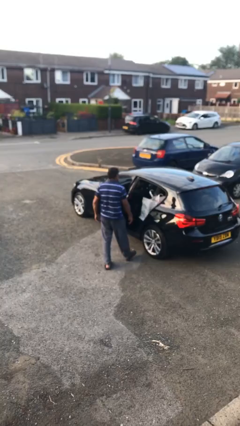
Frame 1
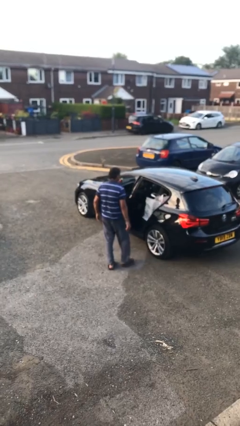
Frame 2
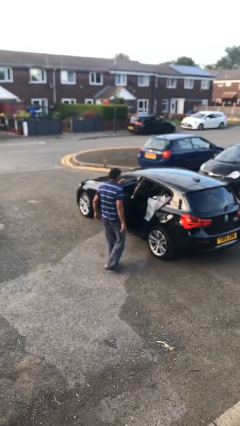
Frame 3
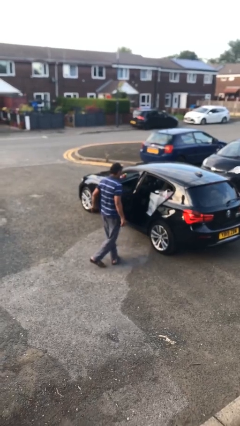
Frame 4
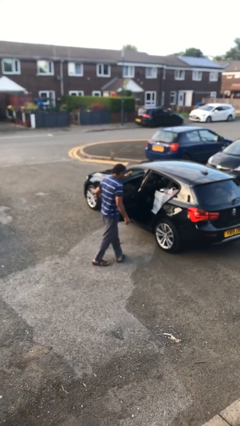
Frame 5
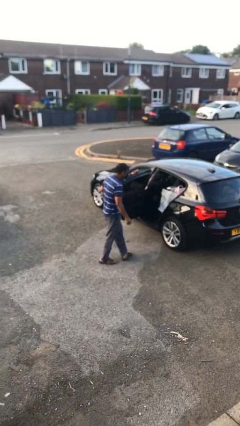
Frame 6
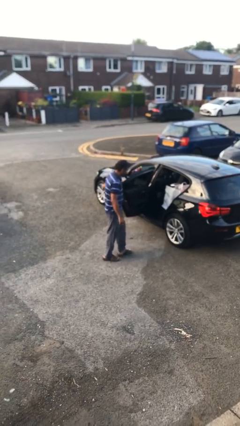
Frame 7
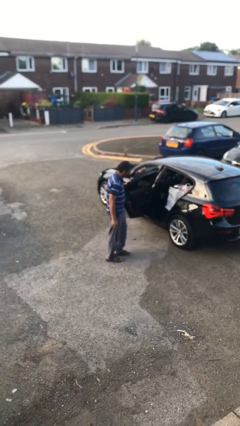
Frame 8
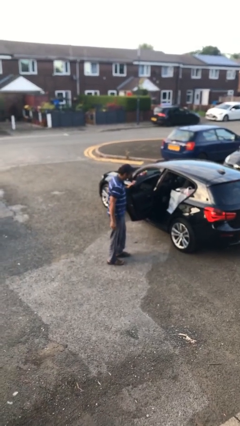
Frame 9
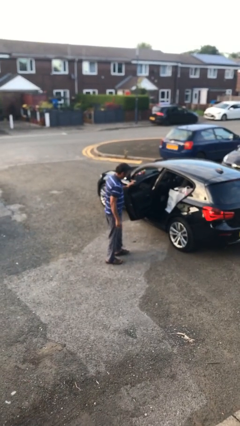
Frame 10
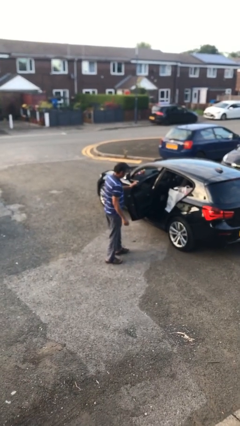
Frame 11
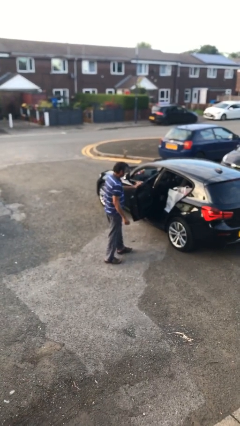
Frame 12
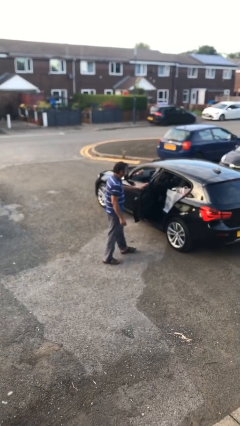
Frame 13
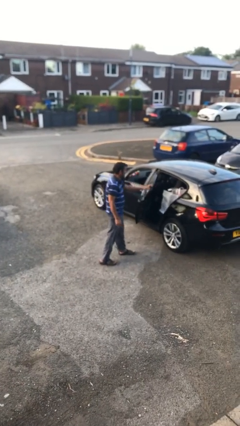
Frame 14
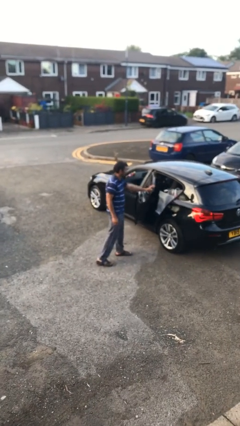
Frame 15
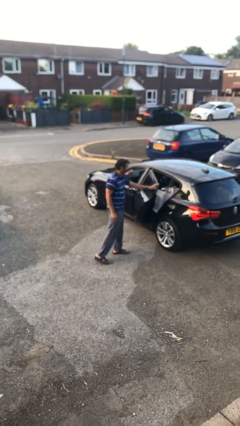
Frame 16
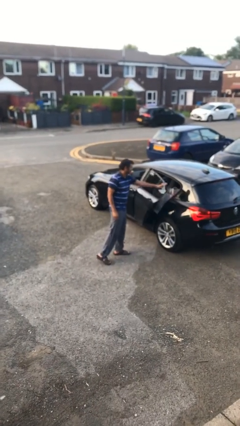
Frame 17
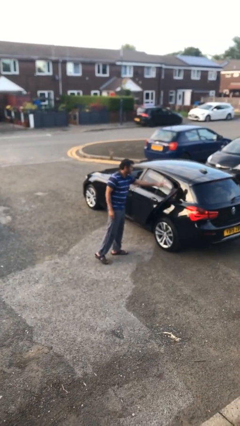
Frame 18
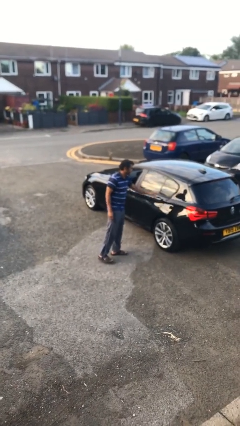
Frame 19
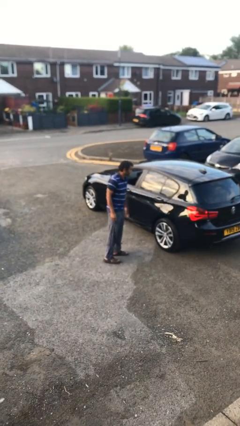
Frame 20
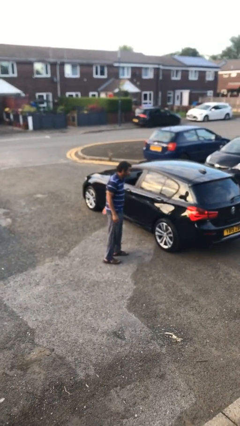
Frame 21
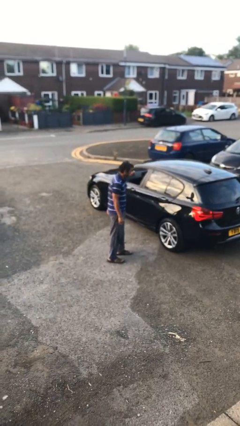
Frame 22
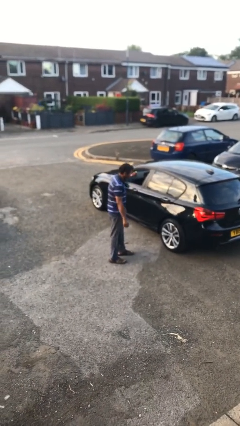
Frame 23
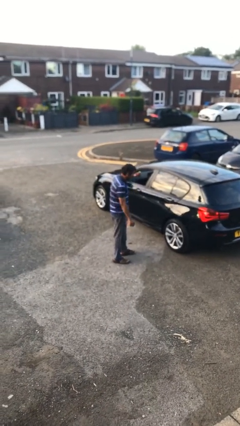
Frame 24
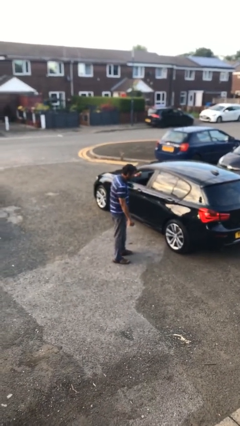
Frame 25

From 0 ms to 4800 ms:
person closes car door

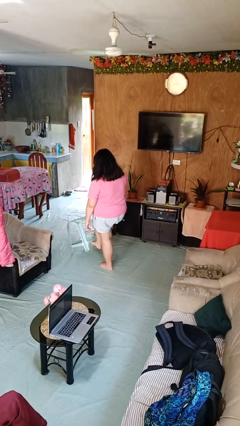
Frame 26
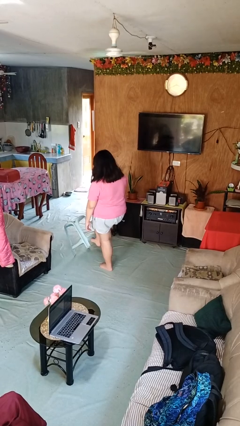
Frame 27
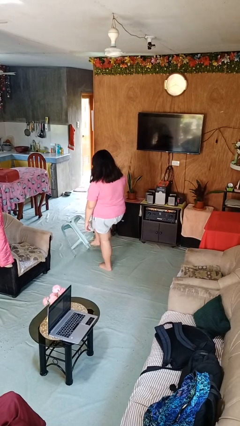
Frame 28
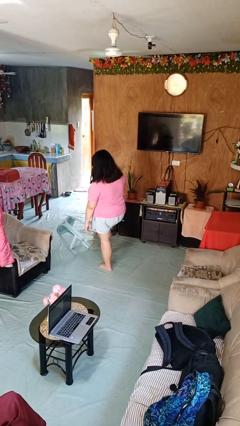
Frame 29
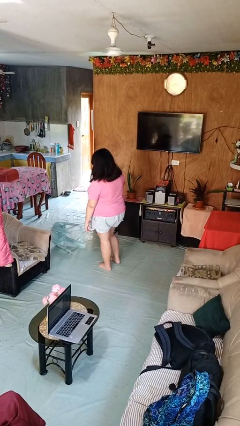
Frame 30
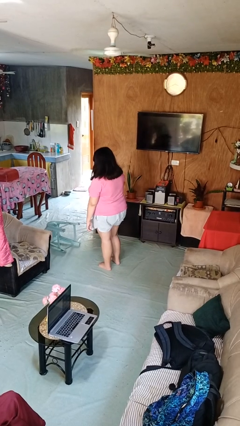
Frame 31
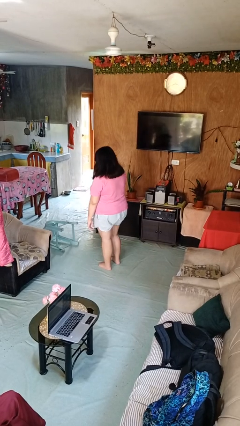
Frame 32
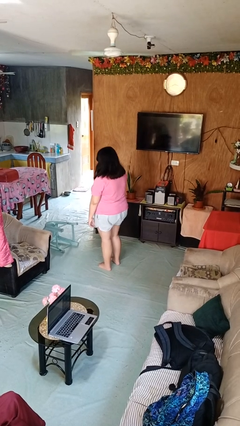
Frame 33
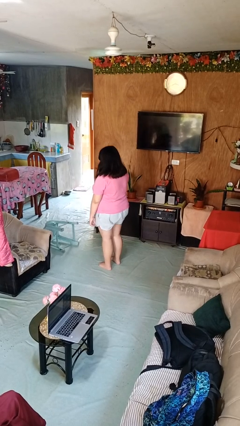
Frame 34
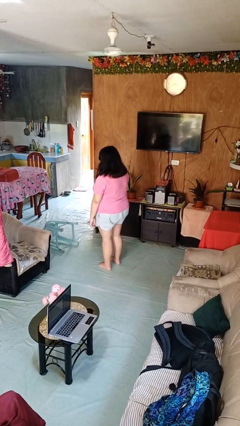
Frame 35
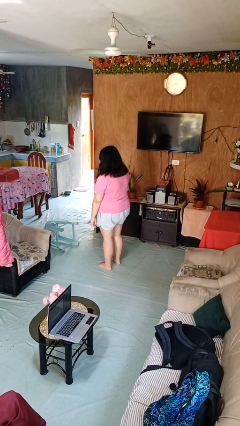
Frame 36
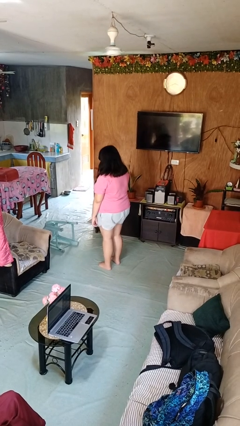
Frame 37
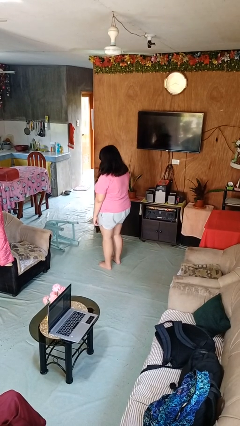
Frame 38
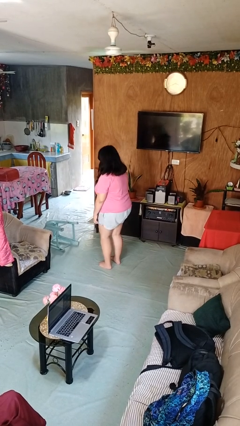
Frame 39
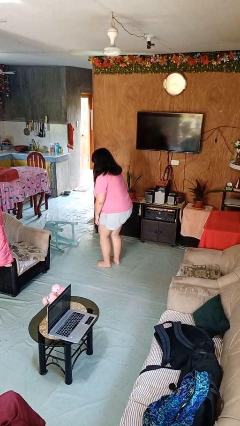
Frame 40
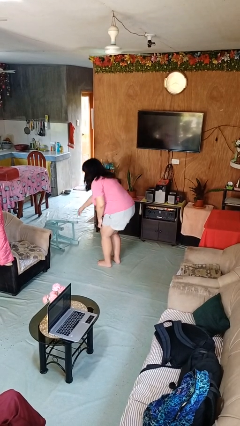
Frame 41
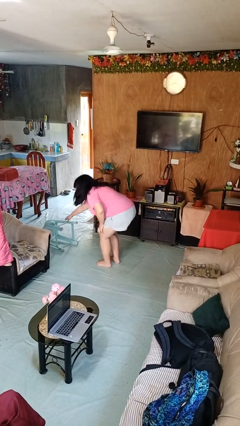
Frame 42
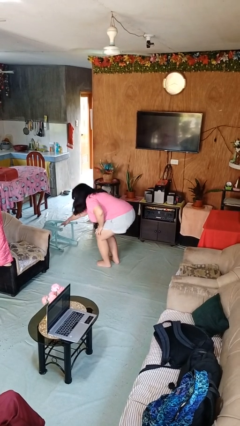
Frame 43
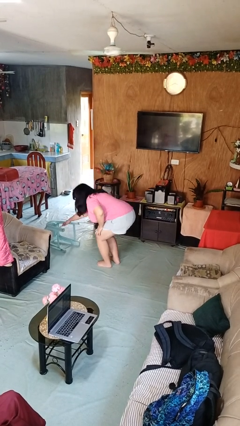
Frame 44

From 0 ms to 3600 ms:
person knocks over furniture

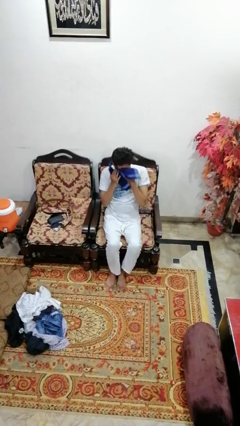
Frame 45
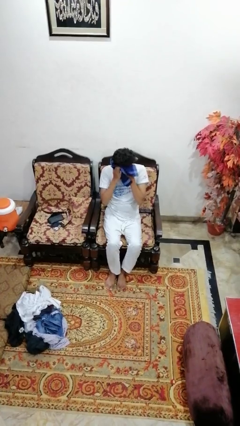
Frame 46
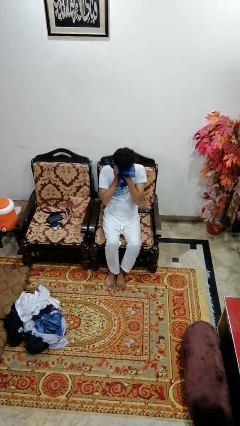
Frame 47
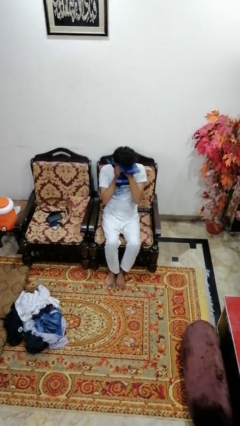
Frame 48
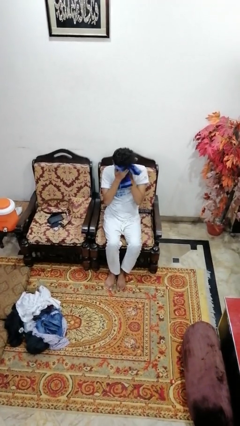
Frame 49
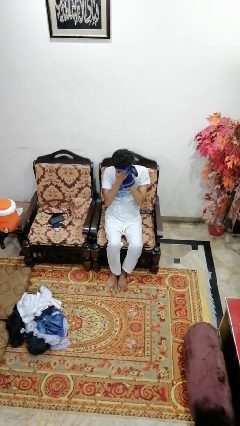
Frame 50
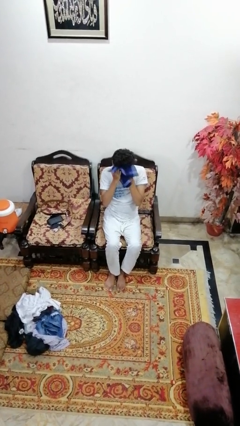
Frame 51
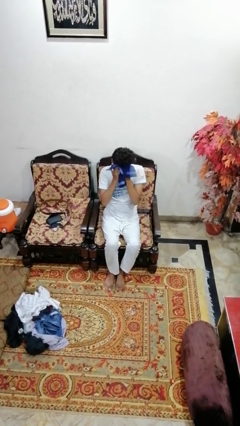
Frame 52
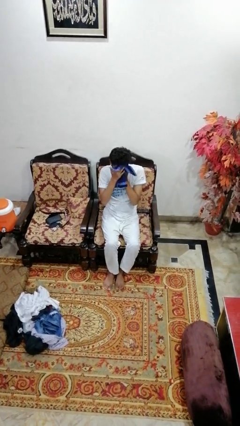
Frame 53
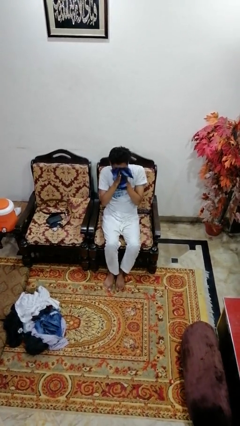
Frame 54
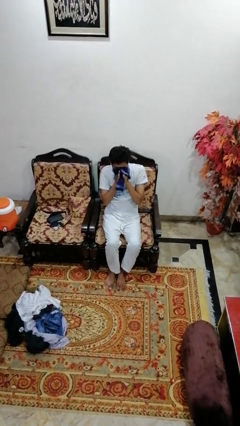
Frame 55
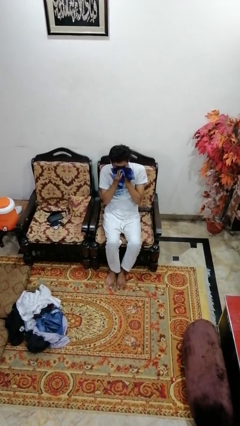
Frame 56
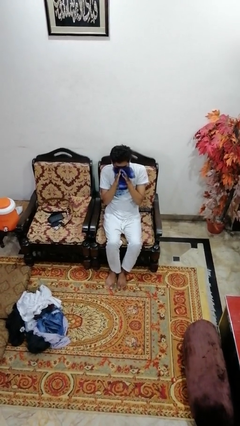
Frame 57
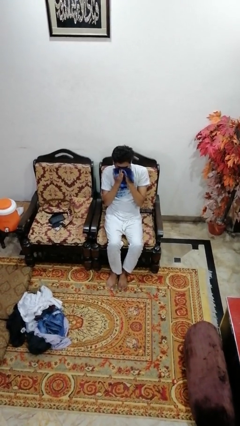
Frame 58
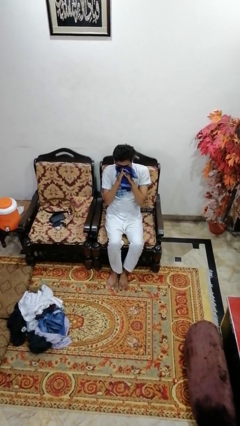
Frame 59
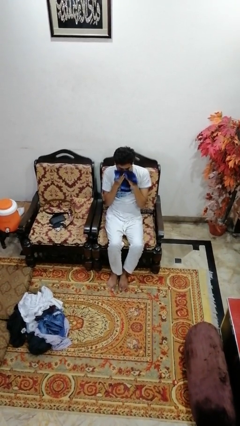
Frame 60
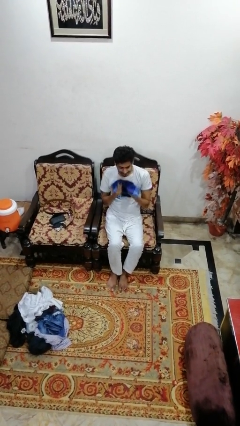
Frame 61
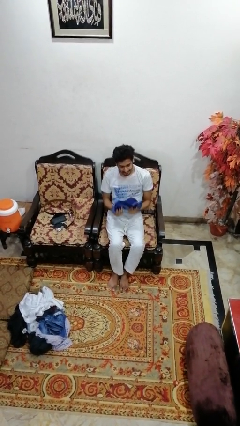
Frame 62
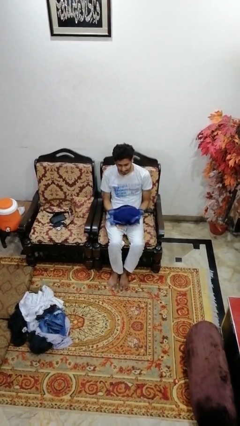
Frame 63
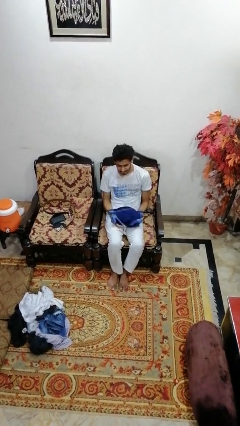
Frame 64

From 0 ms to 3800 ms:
person wipes mouth with napkin

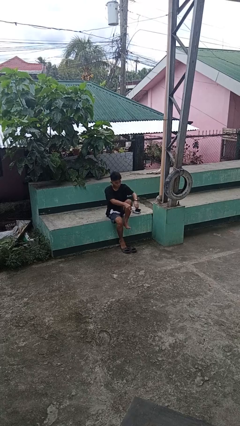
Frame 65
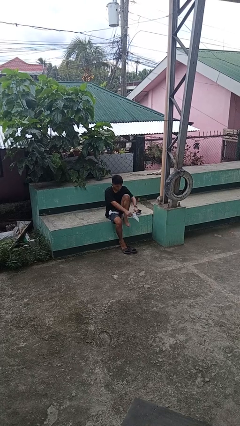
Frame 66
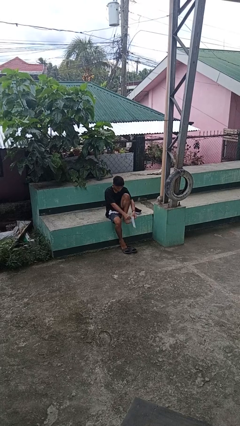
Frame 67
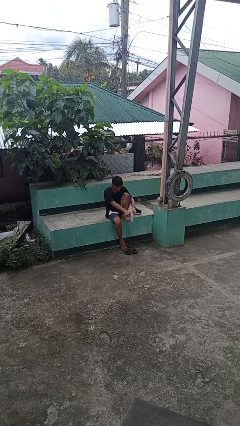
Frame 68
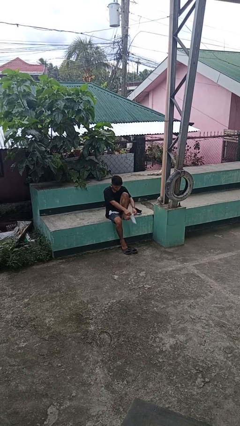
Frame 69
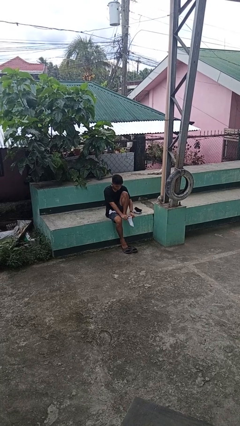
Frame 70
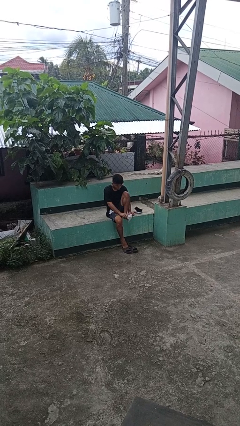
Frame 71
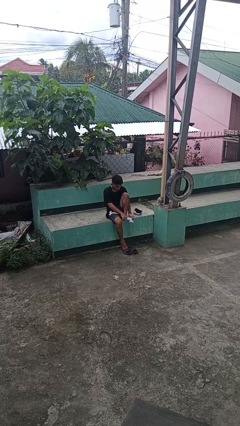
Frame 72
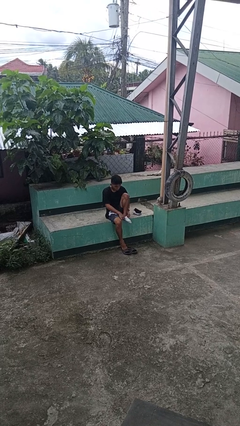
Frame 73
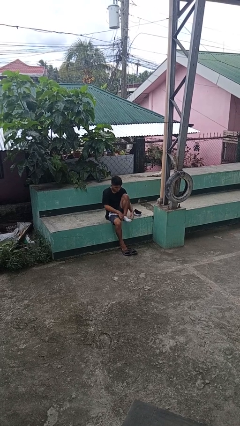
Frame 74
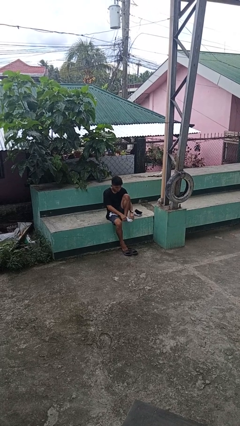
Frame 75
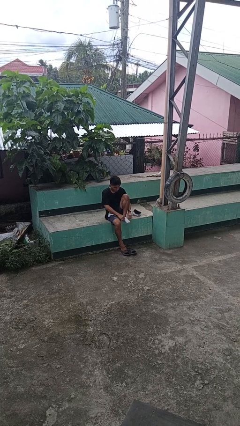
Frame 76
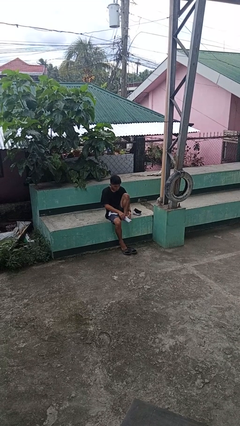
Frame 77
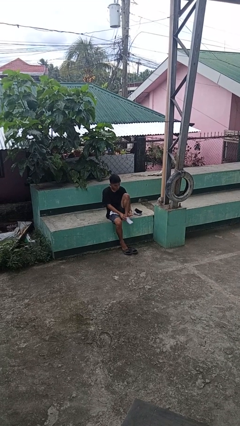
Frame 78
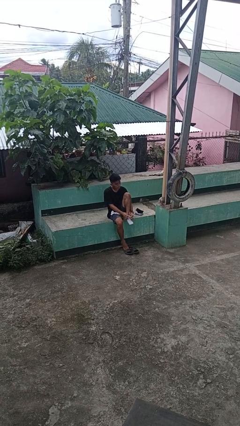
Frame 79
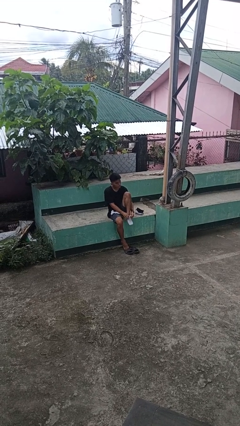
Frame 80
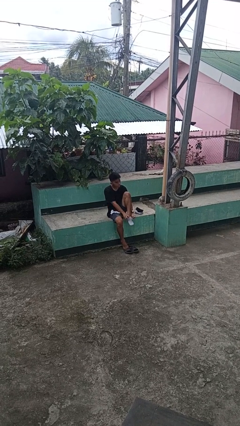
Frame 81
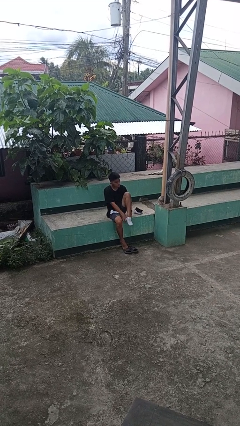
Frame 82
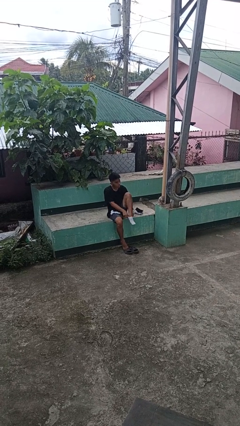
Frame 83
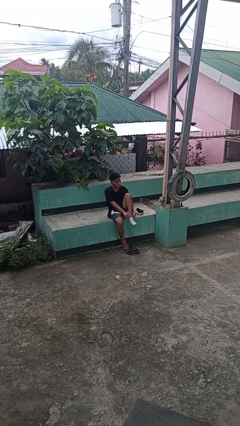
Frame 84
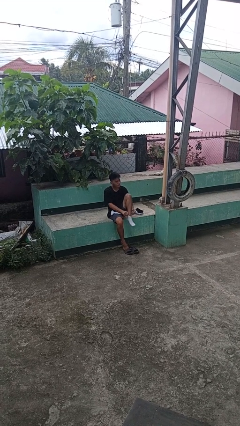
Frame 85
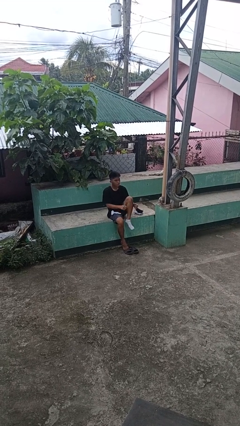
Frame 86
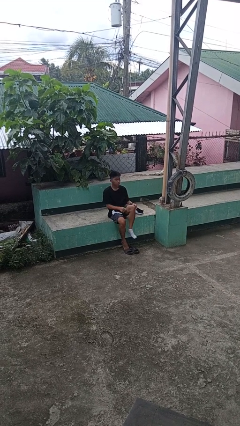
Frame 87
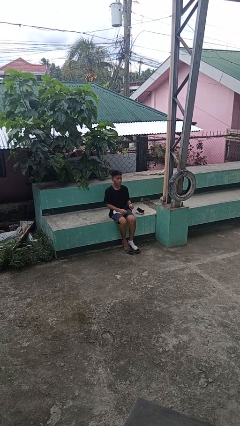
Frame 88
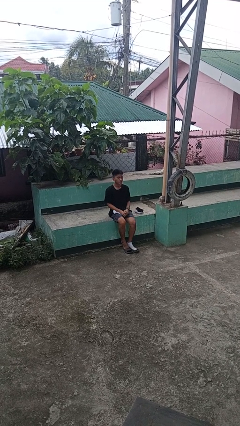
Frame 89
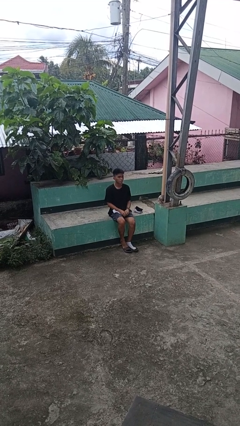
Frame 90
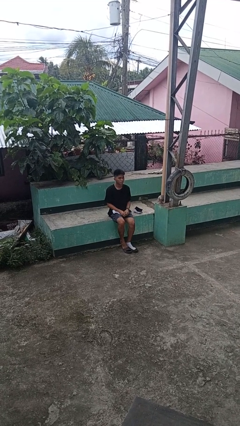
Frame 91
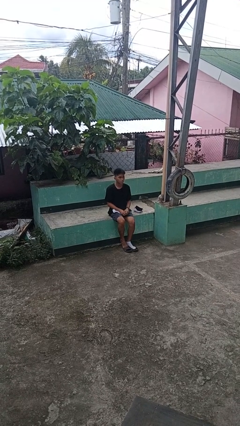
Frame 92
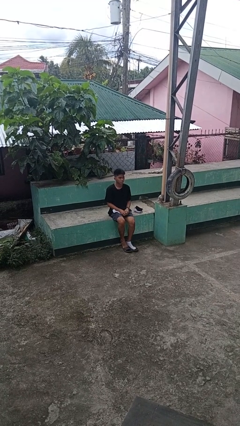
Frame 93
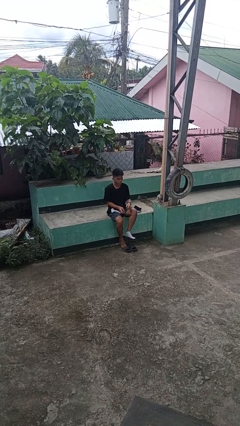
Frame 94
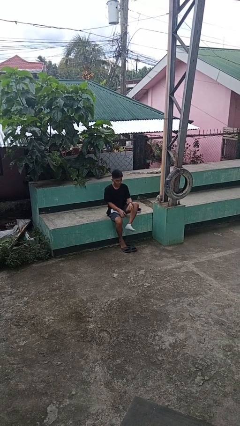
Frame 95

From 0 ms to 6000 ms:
person puts on socks
